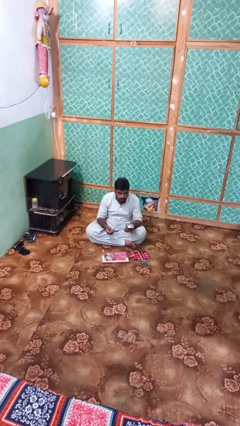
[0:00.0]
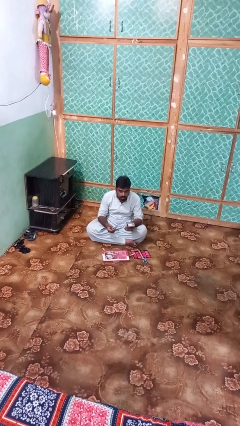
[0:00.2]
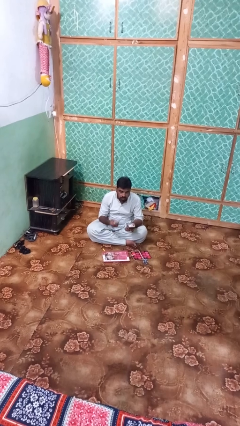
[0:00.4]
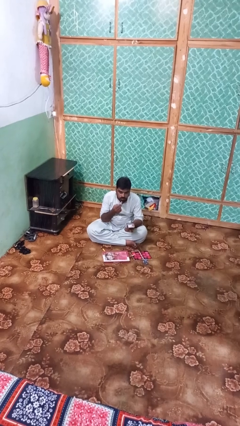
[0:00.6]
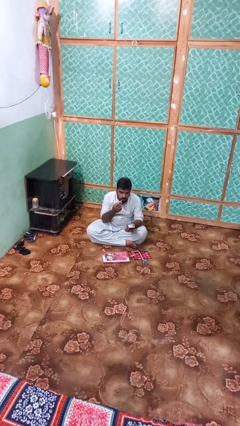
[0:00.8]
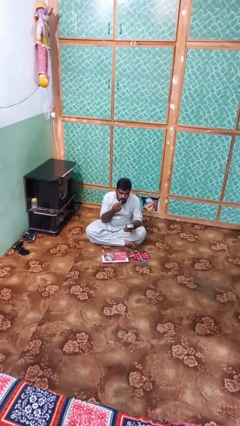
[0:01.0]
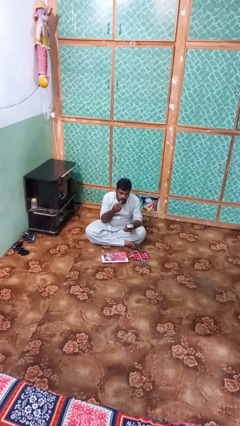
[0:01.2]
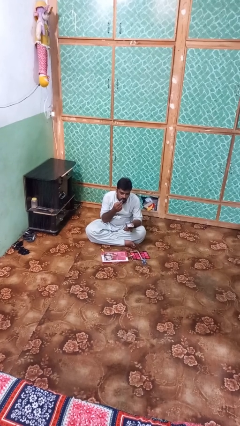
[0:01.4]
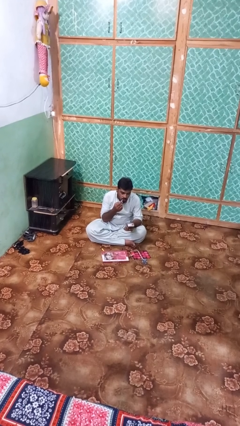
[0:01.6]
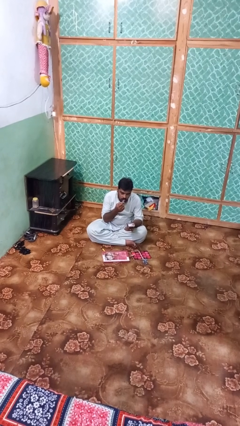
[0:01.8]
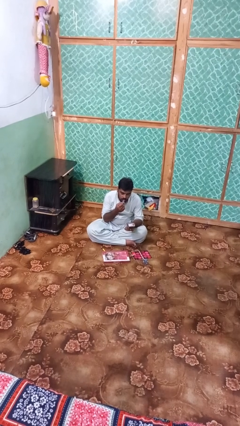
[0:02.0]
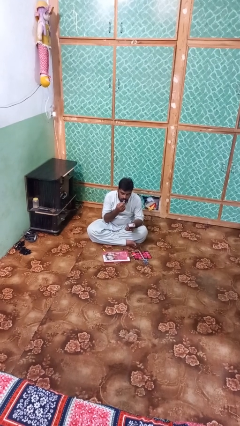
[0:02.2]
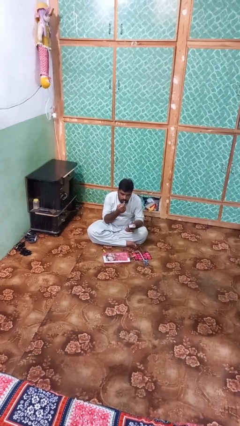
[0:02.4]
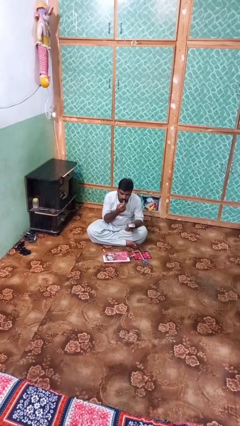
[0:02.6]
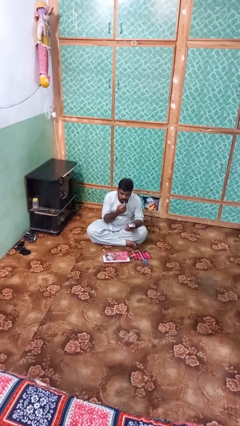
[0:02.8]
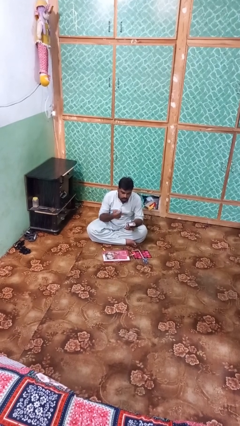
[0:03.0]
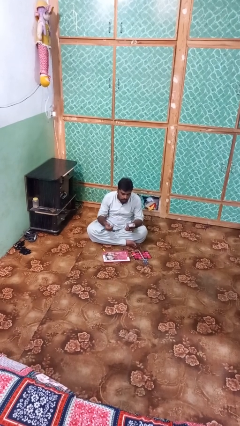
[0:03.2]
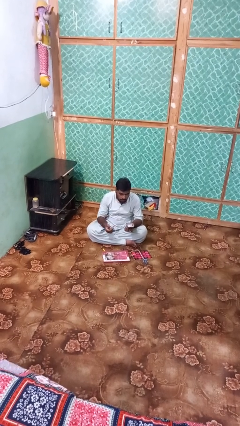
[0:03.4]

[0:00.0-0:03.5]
person applies lip makeup

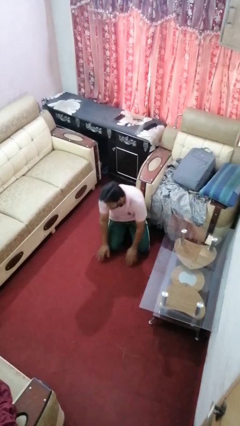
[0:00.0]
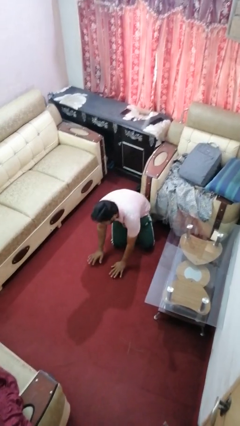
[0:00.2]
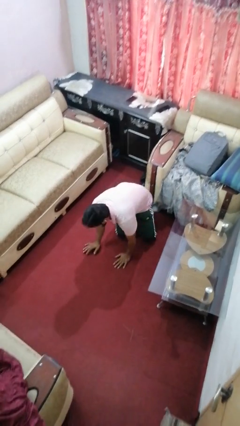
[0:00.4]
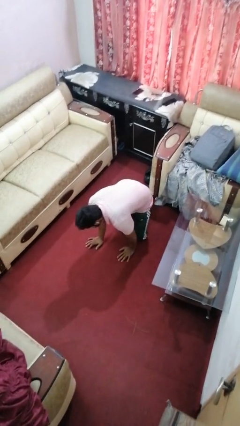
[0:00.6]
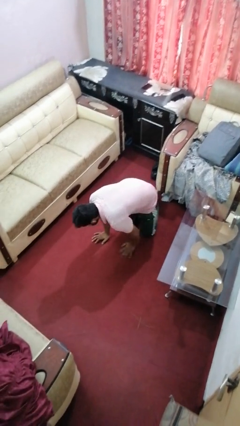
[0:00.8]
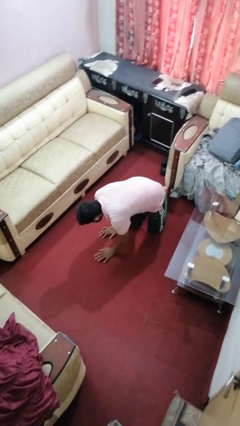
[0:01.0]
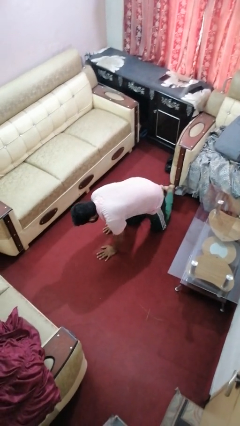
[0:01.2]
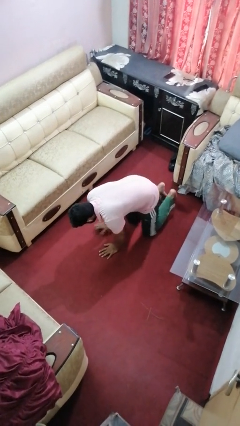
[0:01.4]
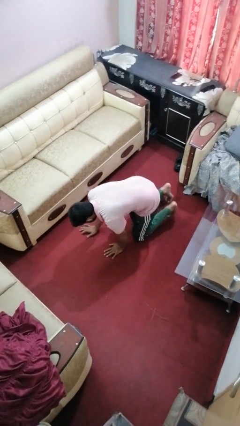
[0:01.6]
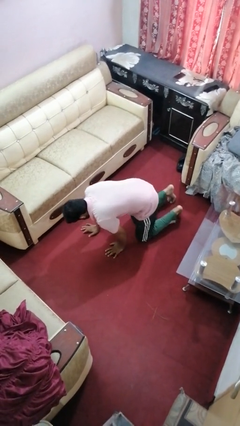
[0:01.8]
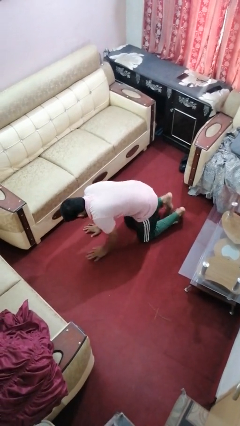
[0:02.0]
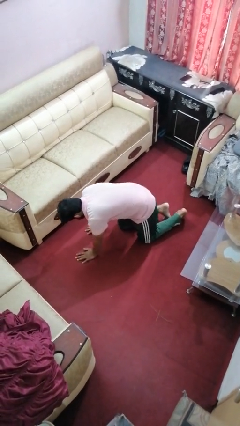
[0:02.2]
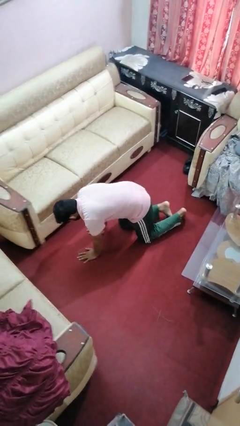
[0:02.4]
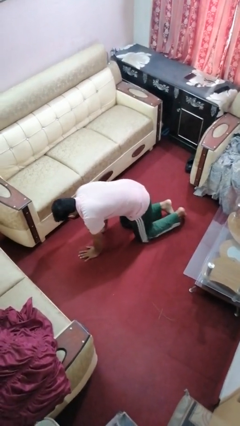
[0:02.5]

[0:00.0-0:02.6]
person crawls

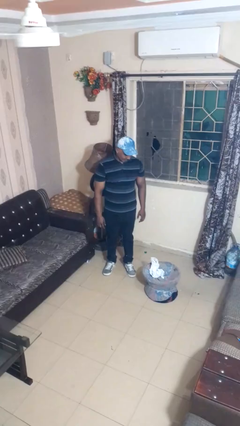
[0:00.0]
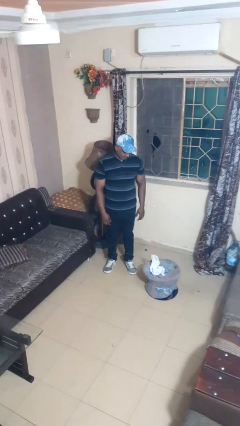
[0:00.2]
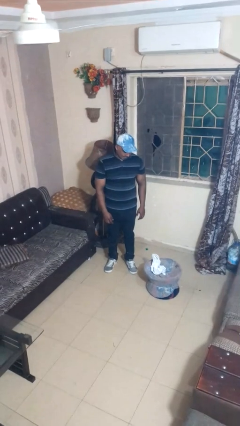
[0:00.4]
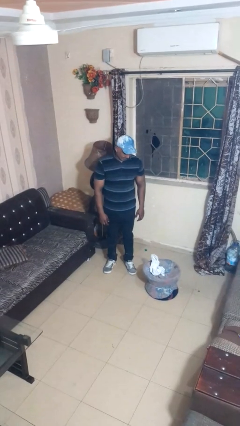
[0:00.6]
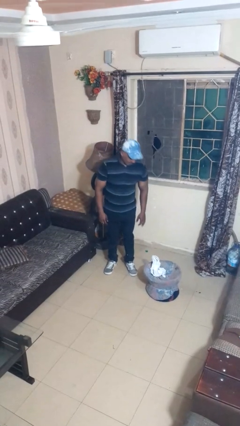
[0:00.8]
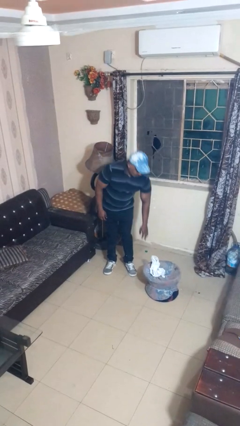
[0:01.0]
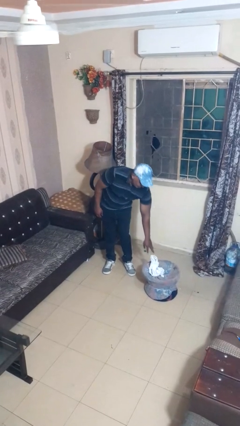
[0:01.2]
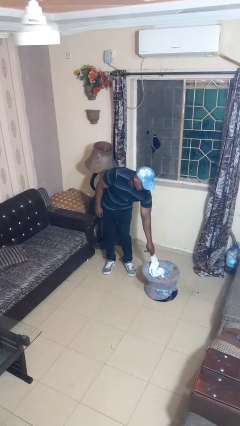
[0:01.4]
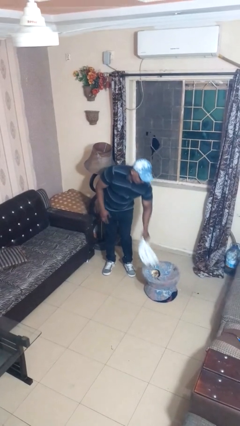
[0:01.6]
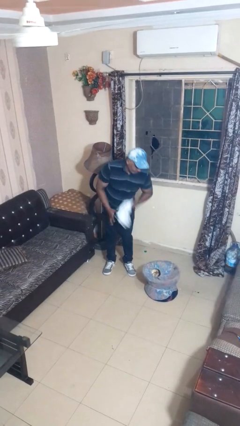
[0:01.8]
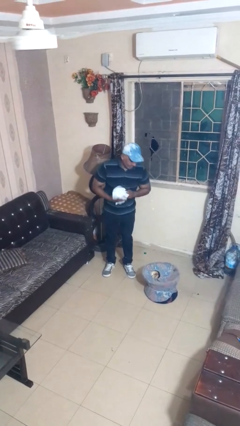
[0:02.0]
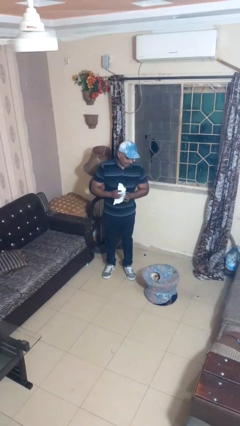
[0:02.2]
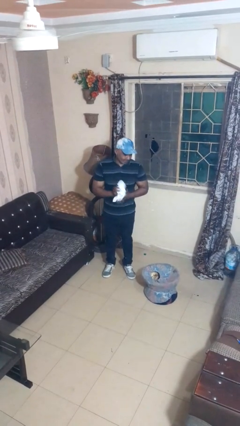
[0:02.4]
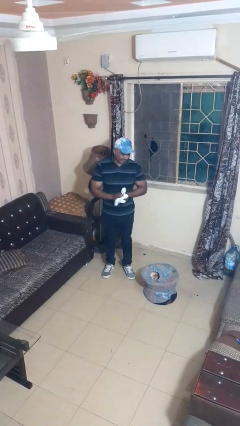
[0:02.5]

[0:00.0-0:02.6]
person takes object from basket

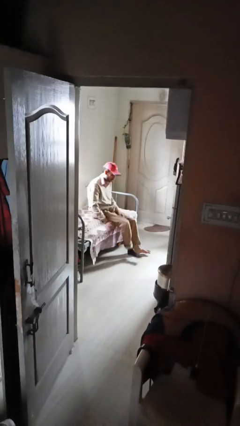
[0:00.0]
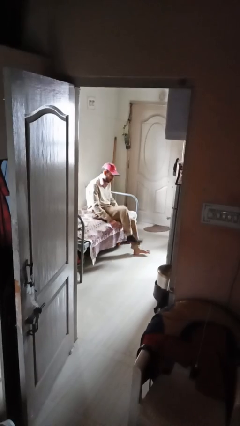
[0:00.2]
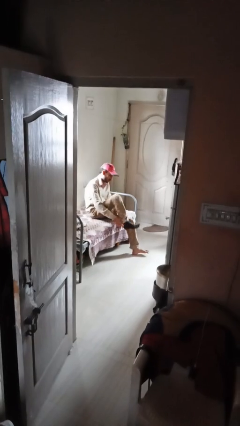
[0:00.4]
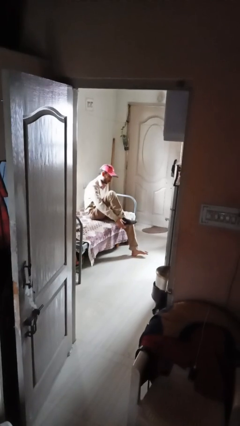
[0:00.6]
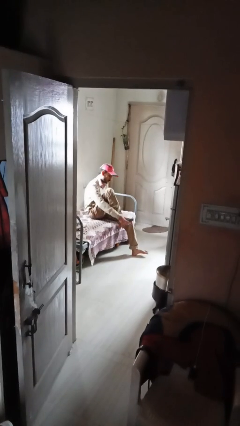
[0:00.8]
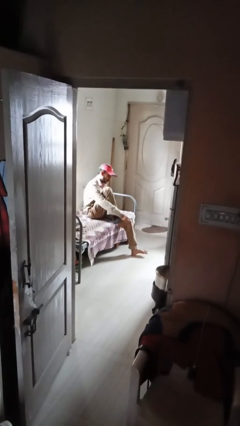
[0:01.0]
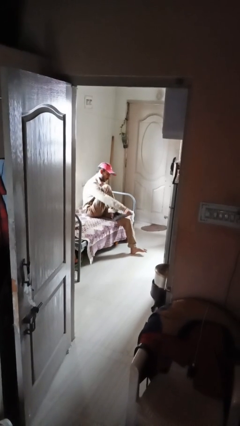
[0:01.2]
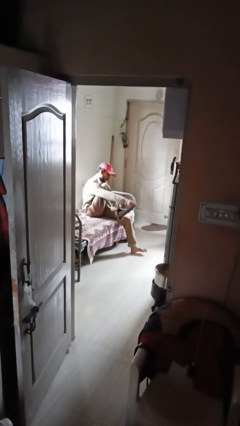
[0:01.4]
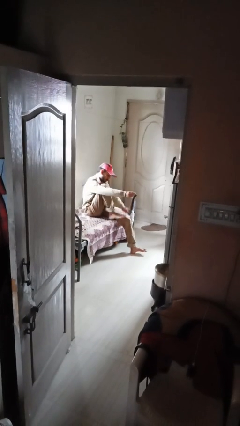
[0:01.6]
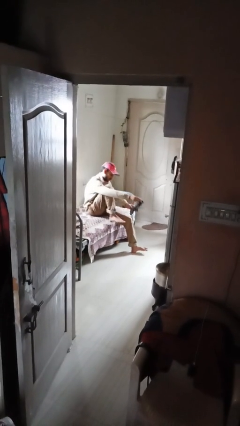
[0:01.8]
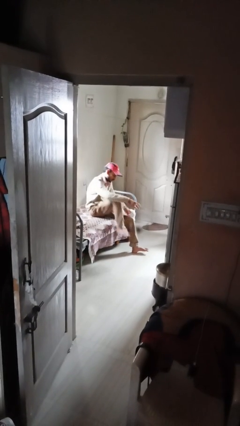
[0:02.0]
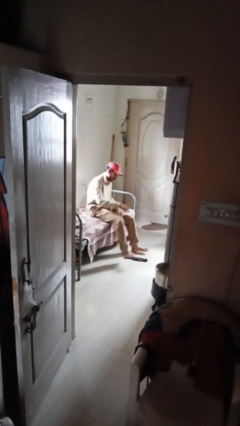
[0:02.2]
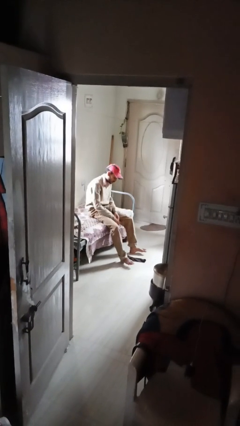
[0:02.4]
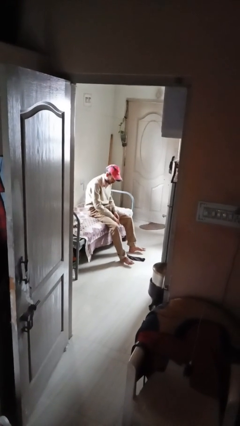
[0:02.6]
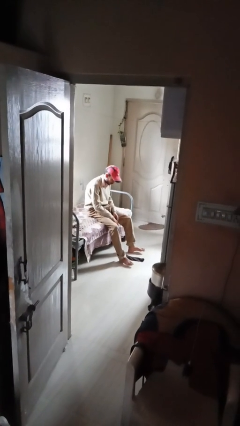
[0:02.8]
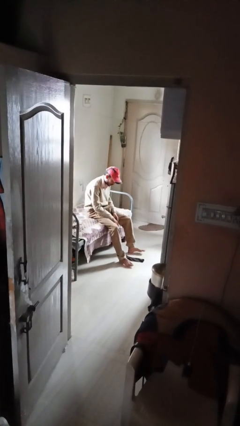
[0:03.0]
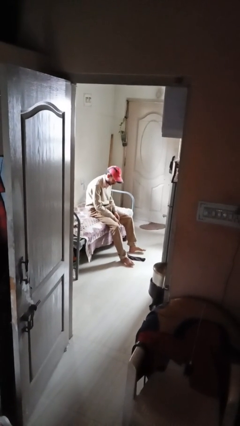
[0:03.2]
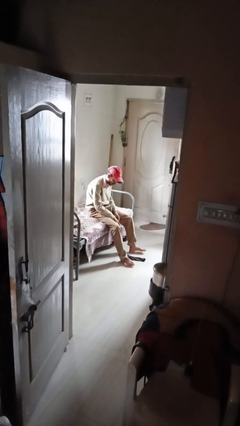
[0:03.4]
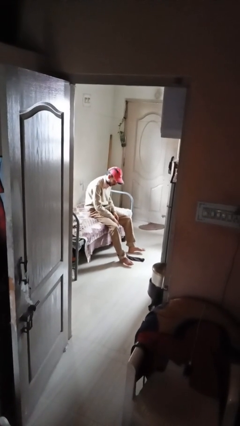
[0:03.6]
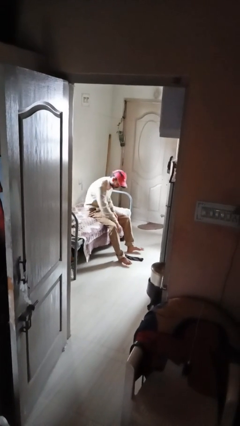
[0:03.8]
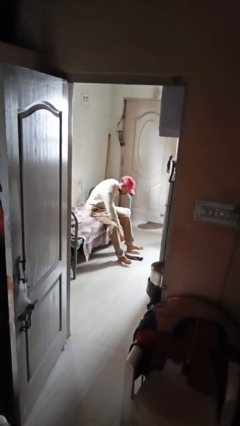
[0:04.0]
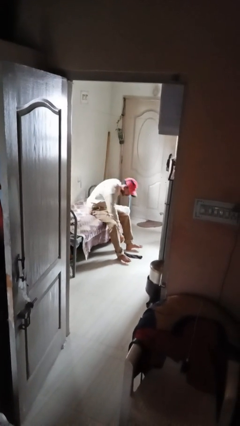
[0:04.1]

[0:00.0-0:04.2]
person takes off socks

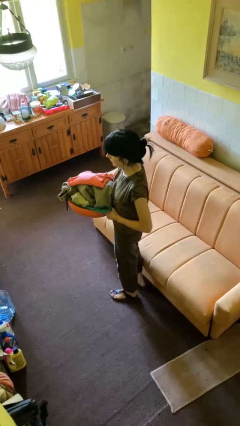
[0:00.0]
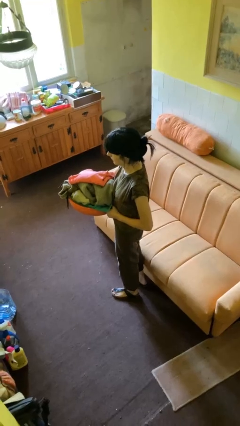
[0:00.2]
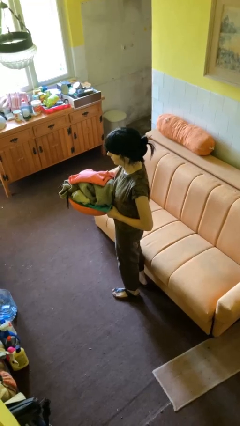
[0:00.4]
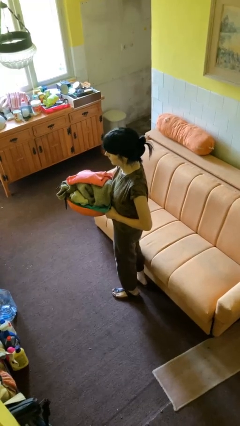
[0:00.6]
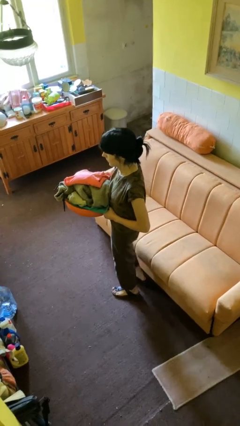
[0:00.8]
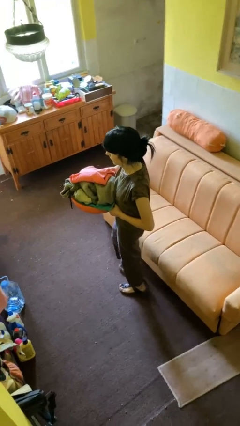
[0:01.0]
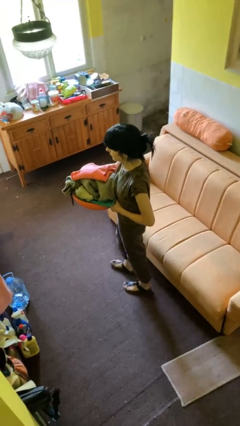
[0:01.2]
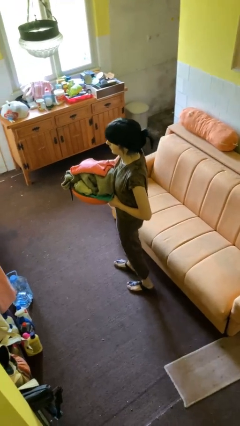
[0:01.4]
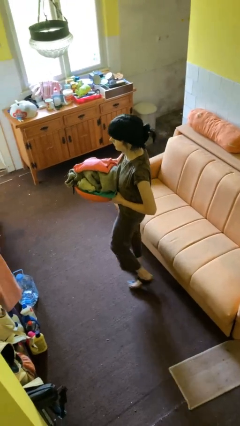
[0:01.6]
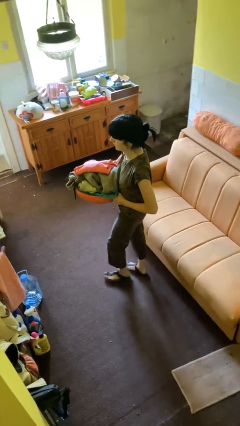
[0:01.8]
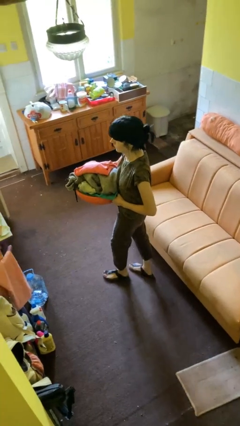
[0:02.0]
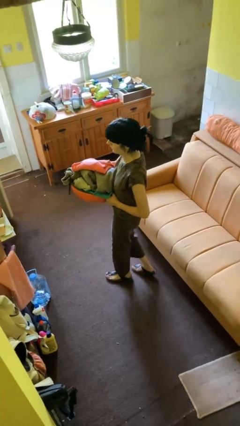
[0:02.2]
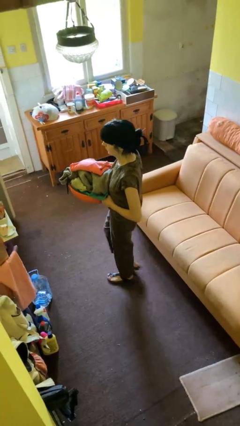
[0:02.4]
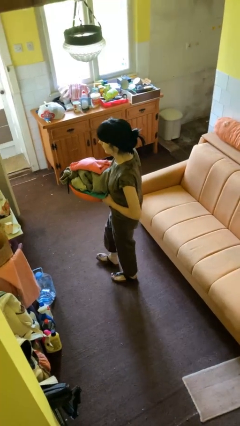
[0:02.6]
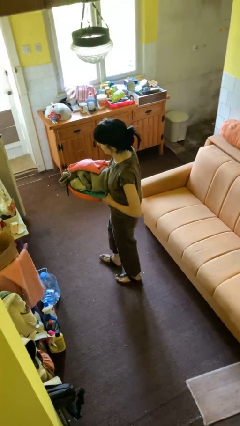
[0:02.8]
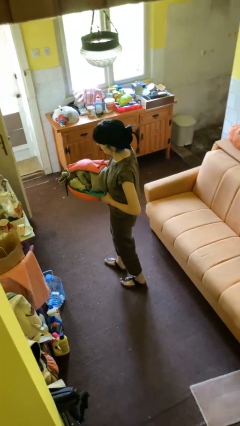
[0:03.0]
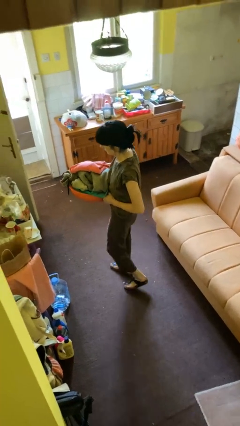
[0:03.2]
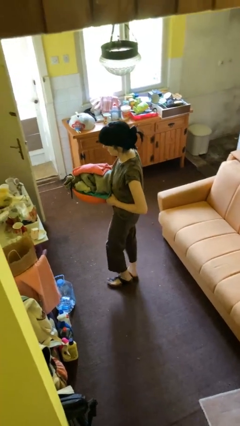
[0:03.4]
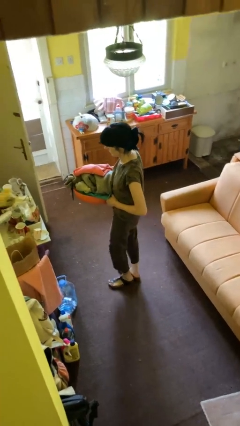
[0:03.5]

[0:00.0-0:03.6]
person carries laundry basket

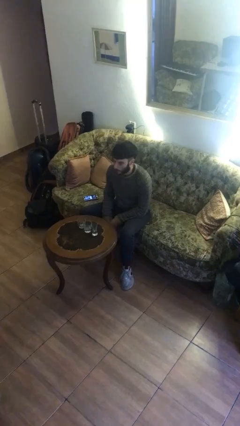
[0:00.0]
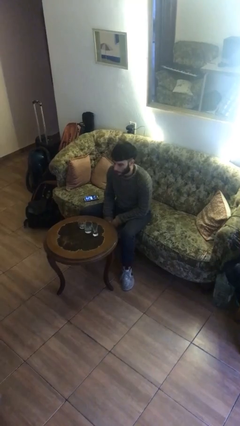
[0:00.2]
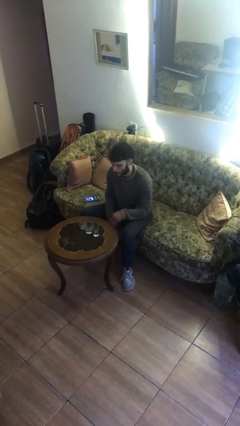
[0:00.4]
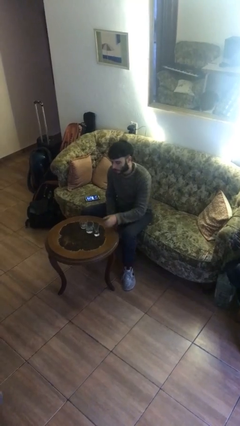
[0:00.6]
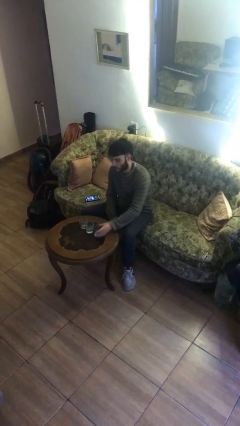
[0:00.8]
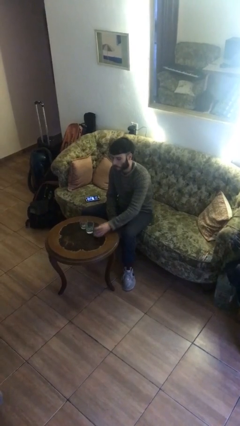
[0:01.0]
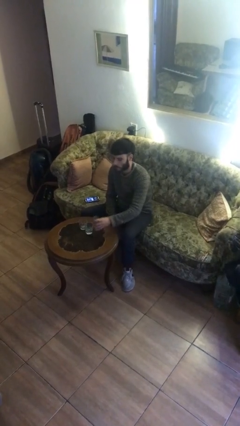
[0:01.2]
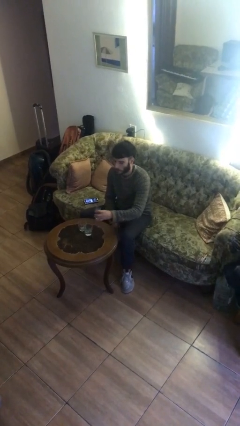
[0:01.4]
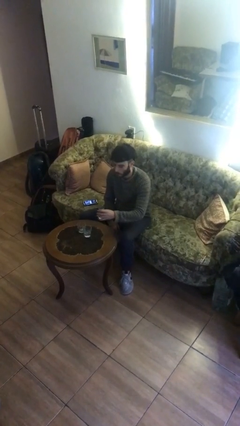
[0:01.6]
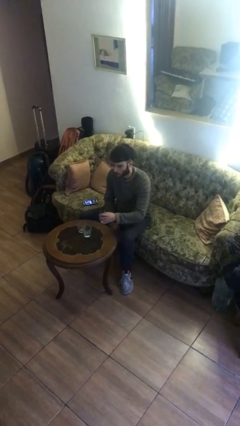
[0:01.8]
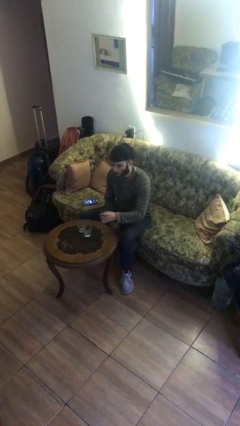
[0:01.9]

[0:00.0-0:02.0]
person picks up object from table
